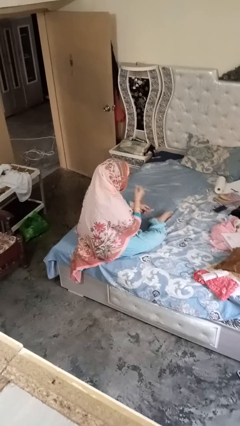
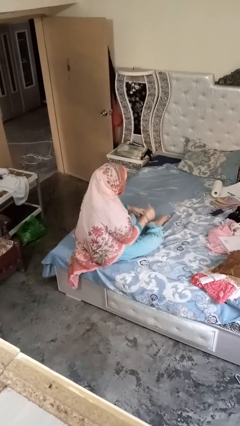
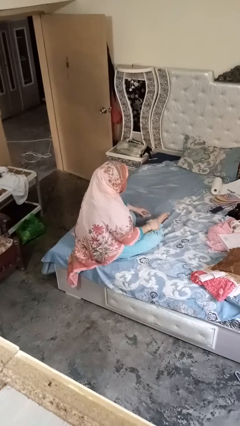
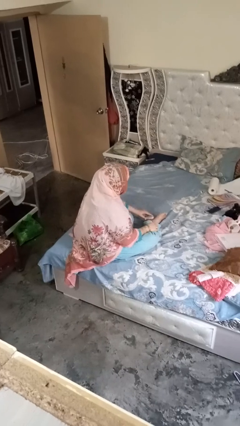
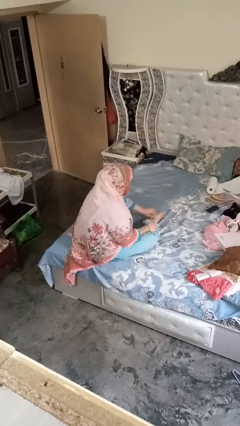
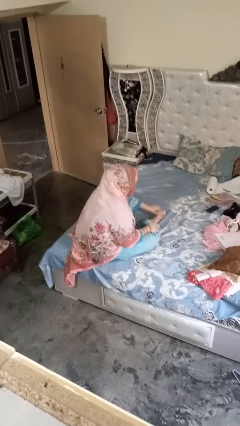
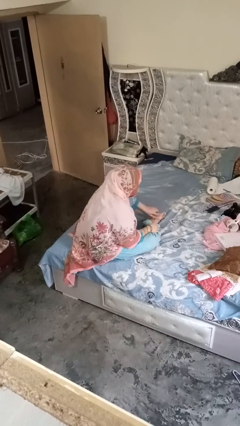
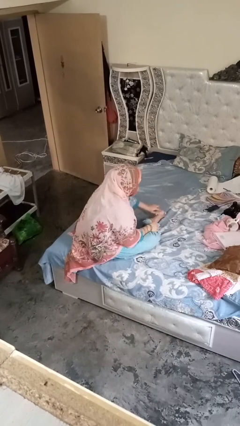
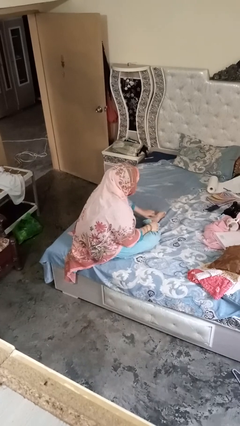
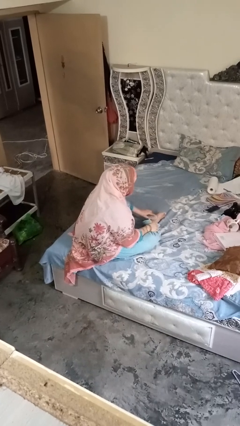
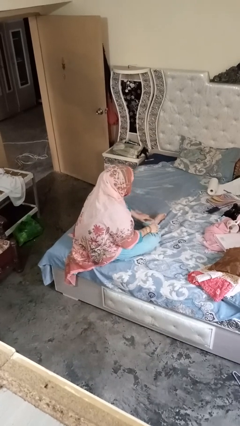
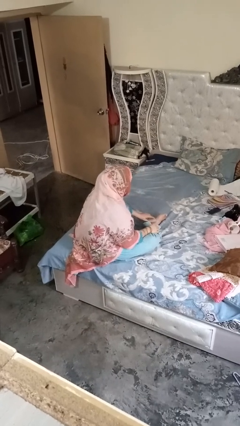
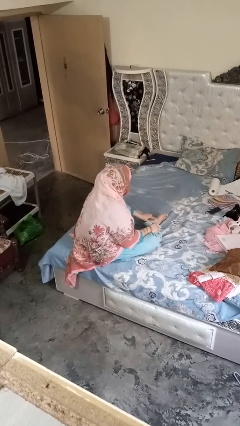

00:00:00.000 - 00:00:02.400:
person rubs foot

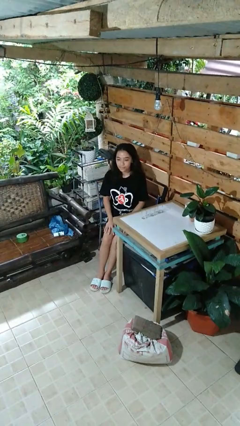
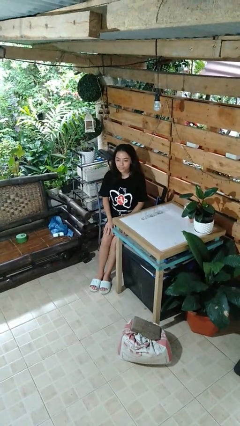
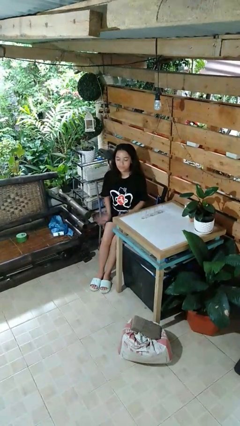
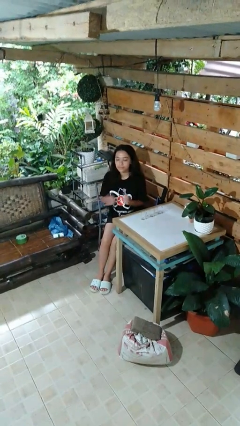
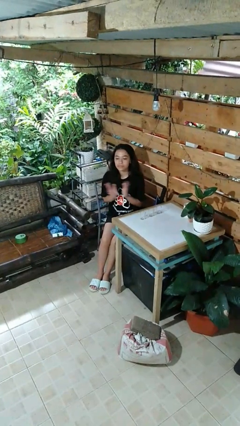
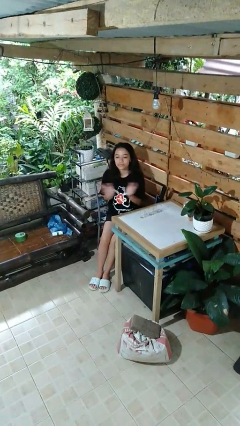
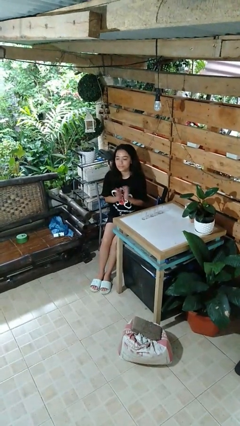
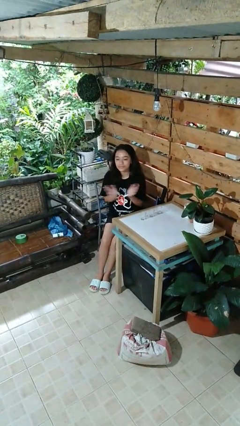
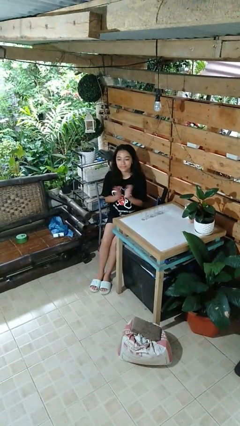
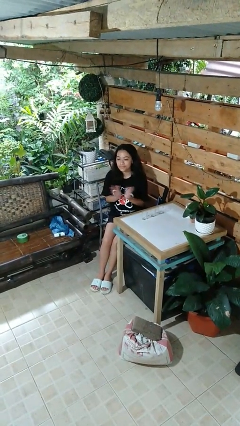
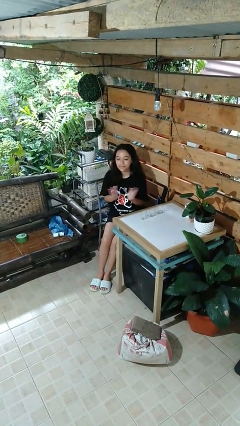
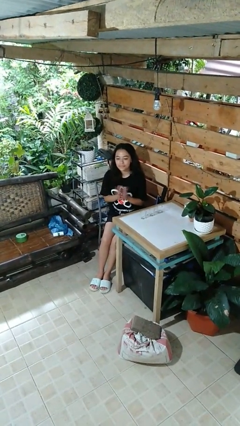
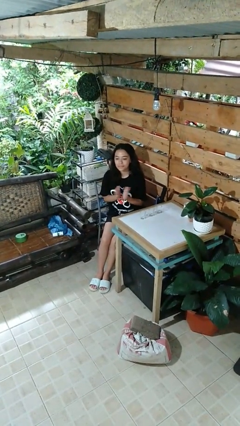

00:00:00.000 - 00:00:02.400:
person claps hands

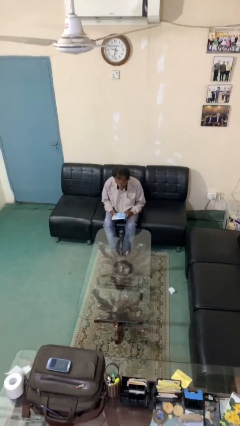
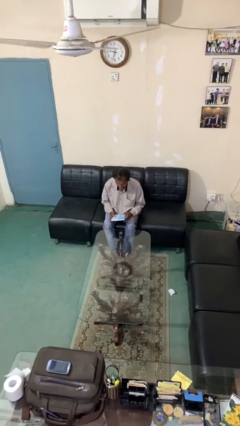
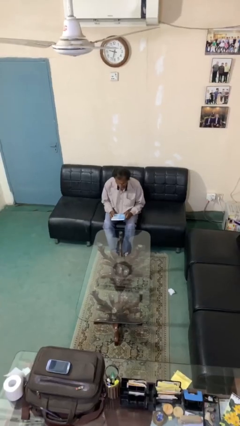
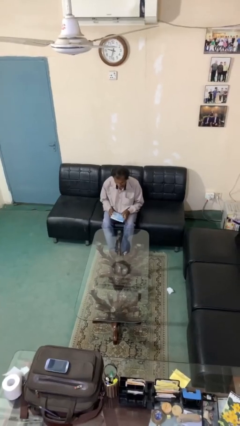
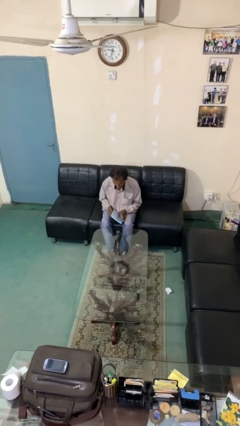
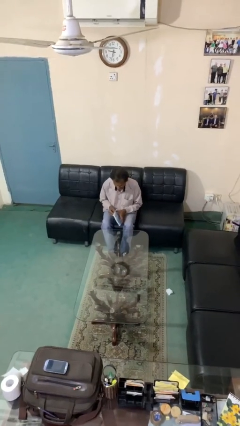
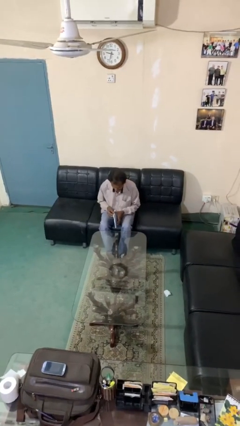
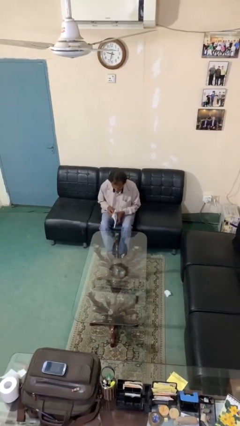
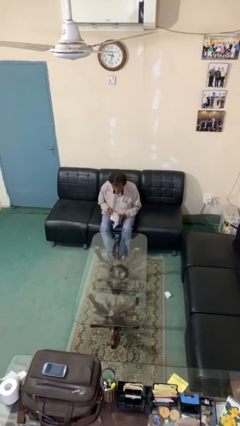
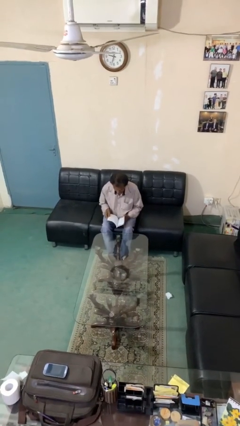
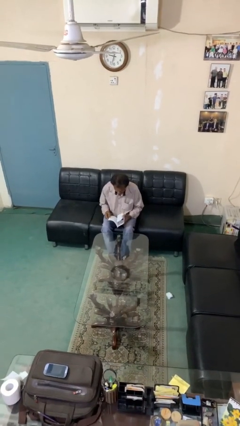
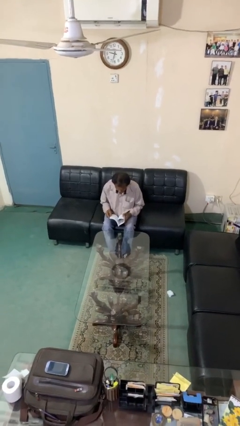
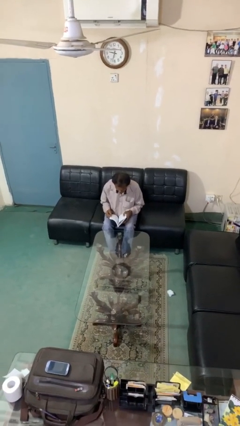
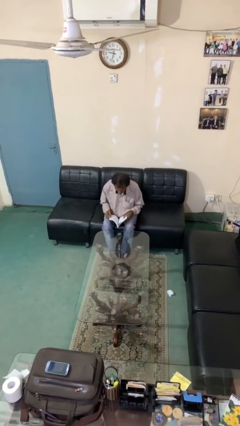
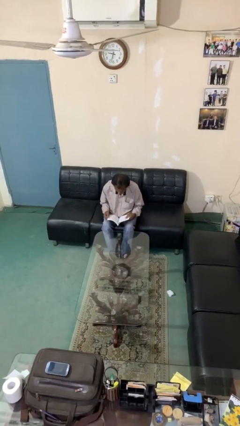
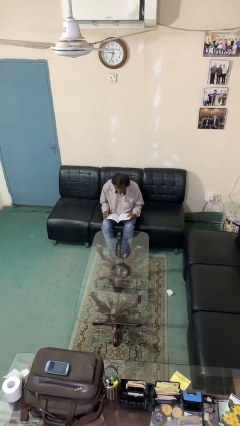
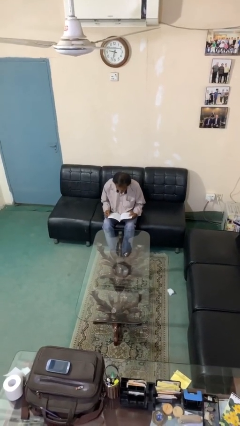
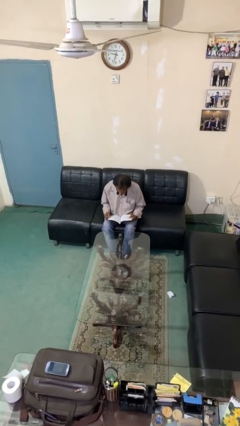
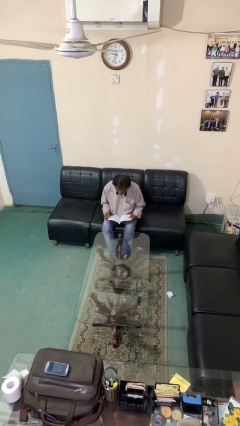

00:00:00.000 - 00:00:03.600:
person reads document

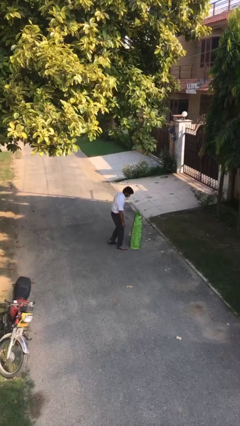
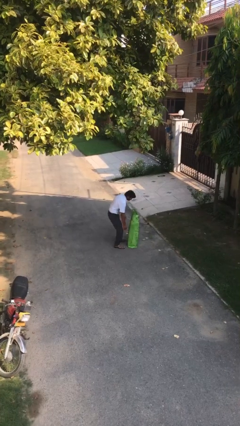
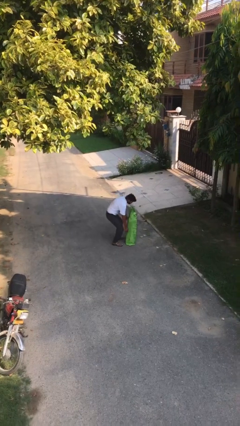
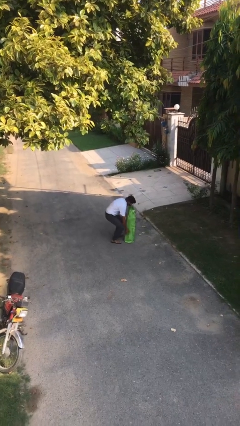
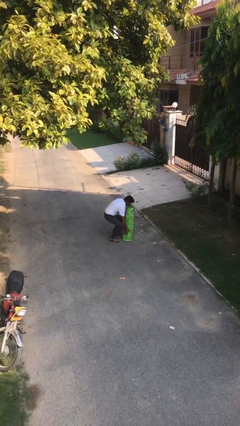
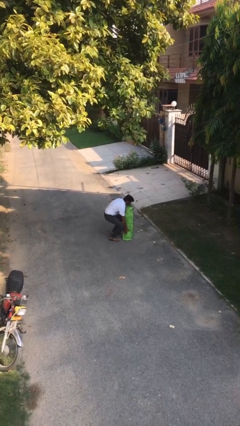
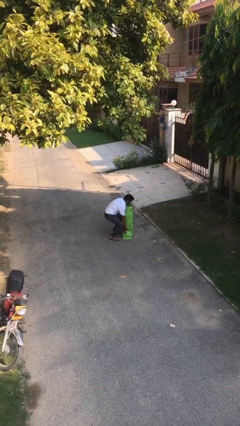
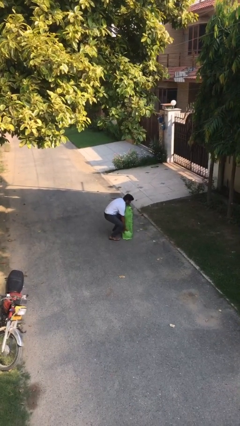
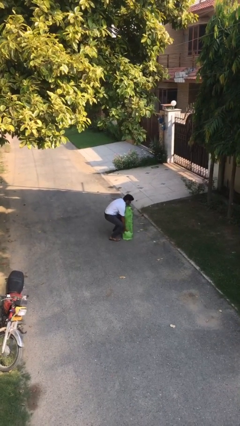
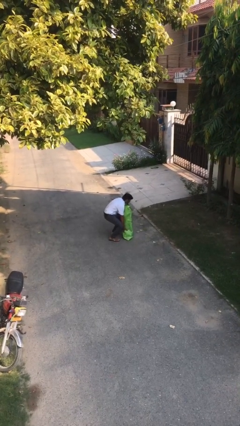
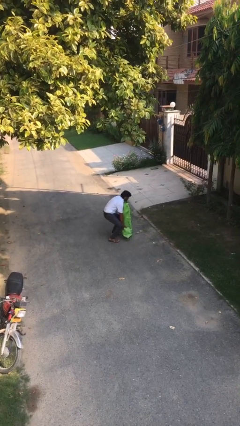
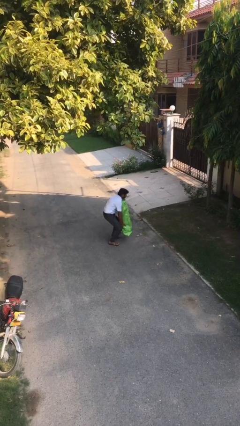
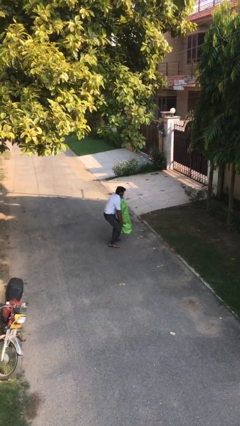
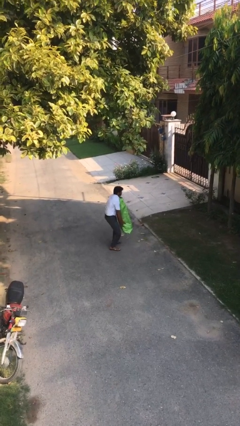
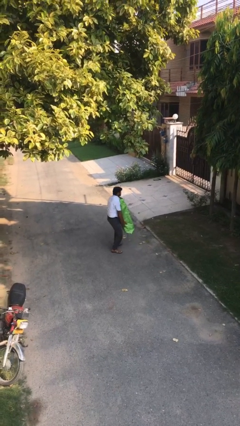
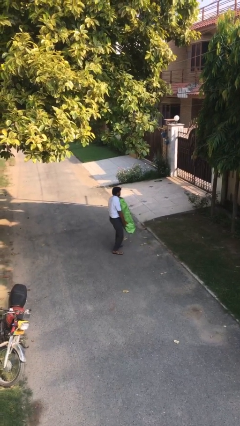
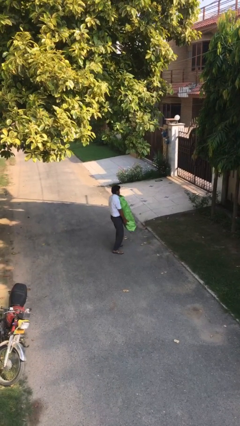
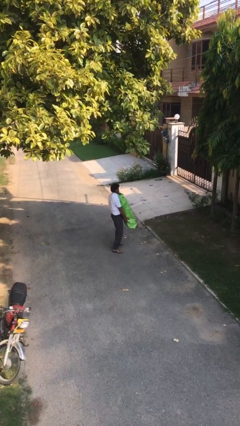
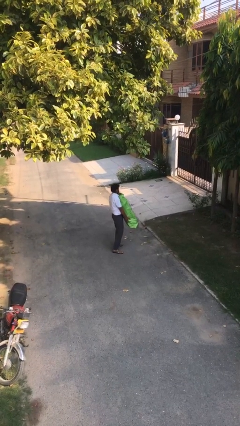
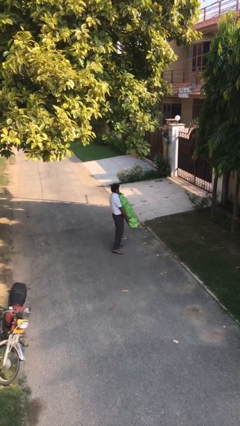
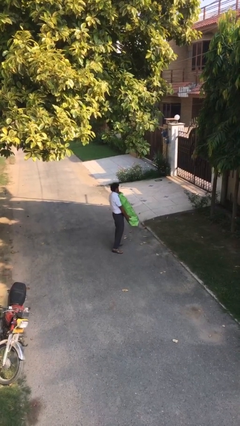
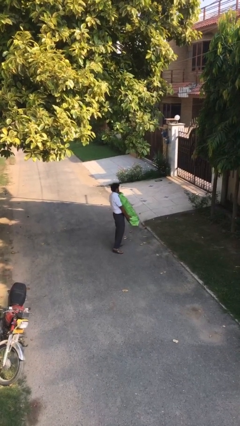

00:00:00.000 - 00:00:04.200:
person picks up object from floor

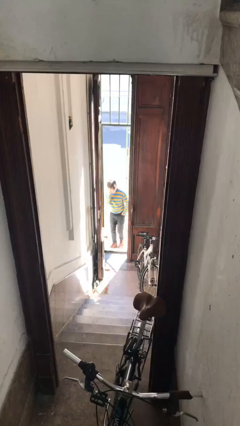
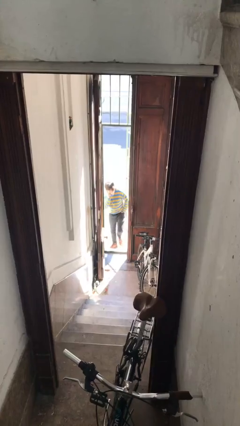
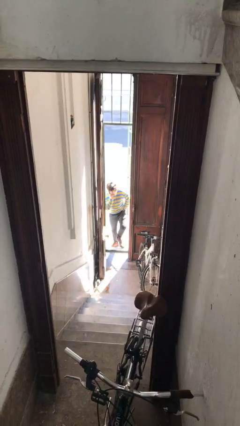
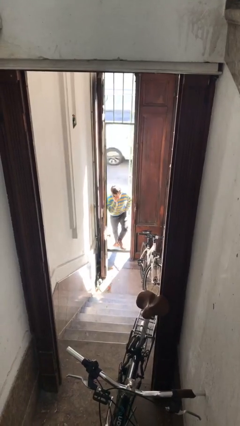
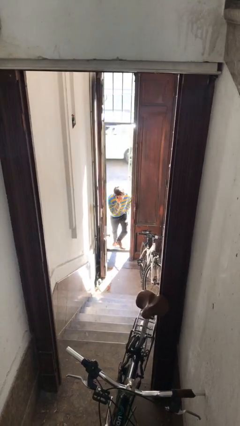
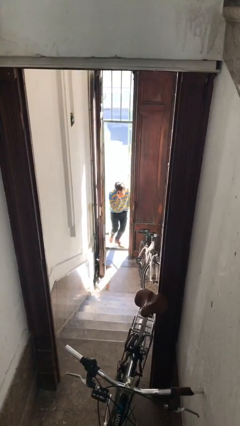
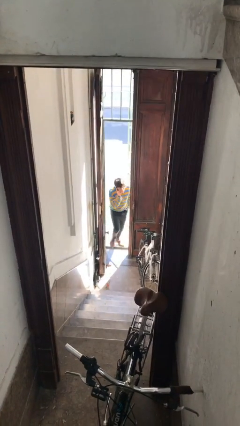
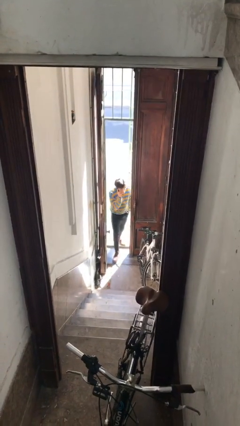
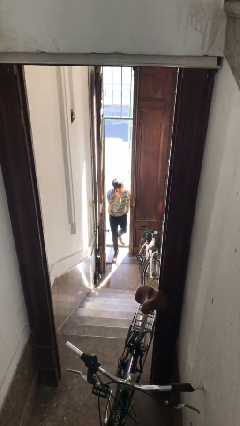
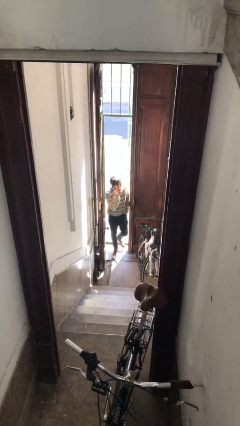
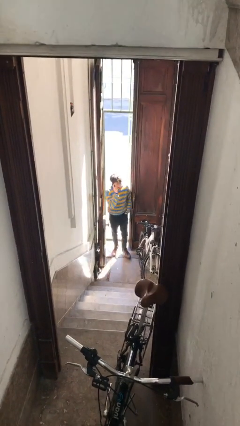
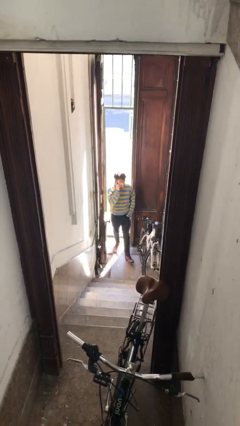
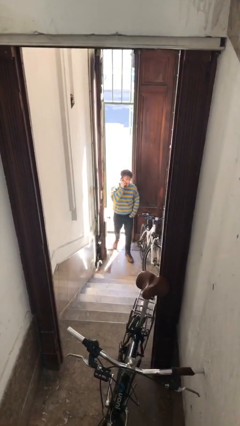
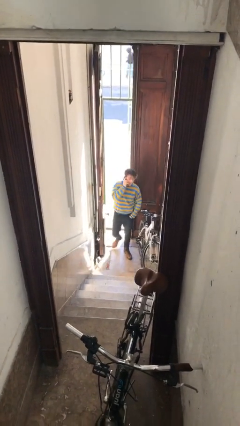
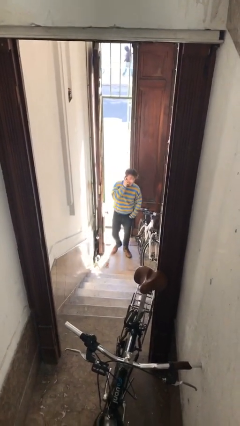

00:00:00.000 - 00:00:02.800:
person enters scene through structure

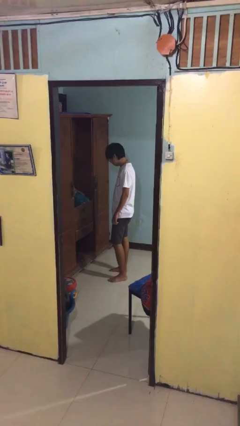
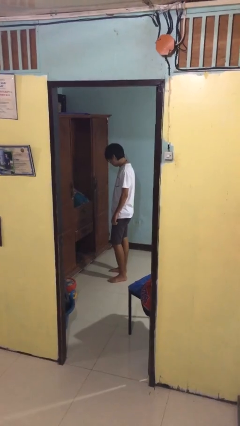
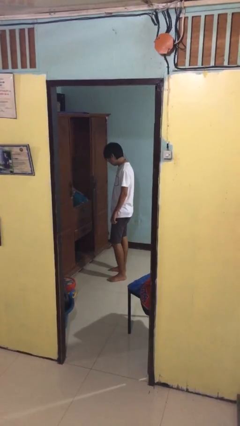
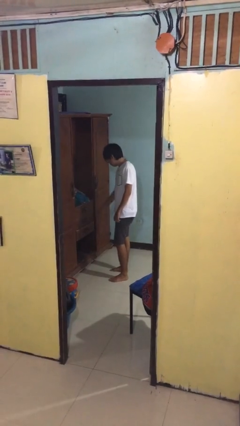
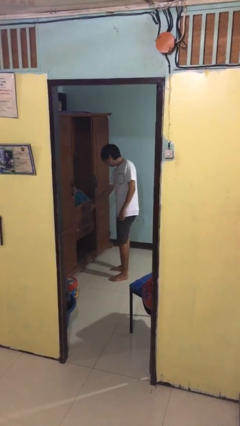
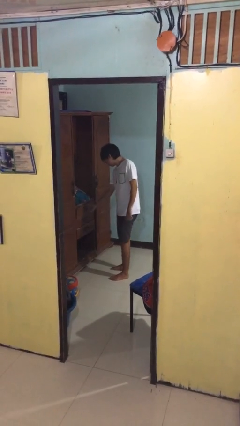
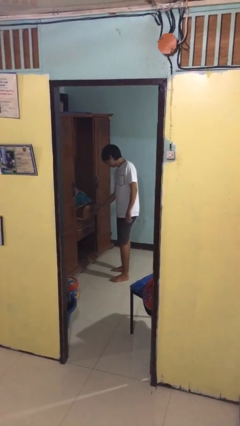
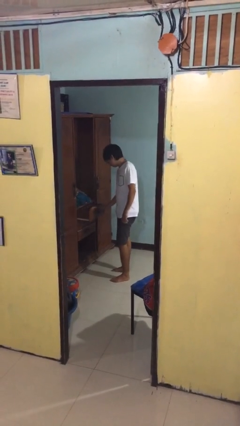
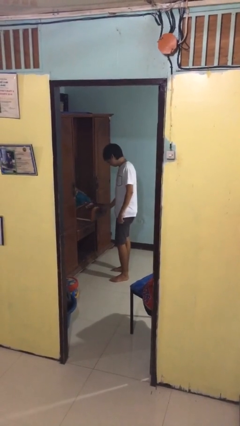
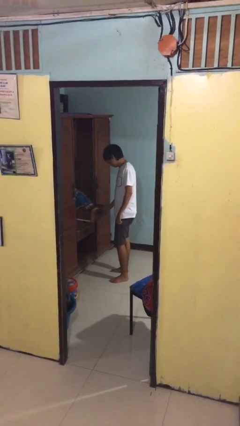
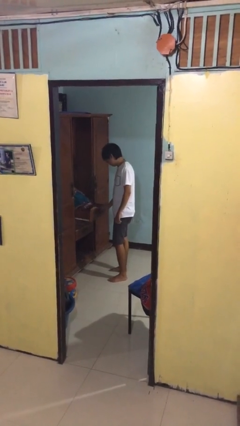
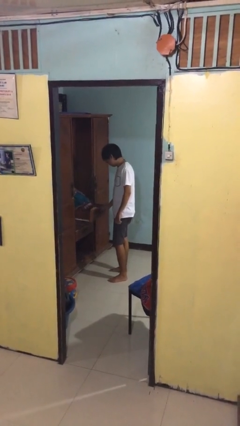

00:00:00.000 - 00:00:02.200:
person opens dresser drawer
